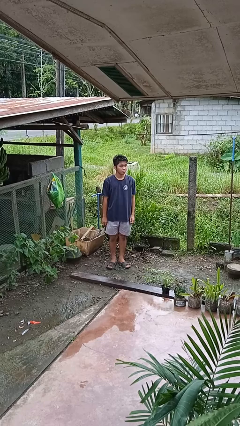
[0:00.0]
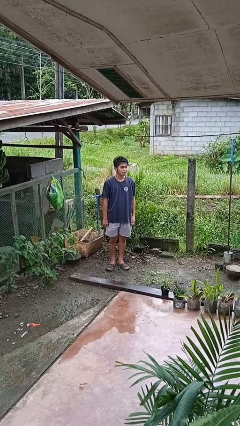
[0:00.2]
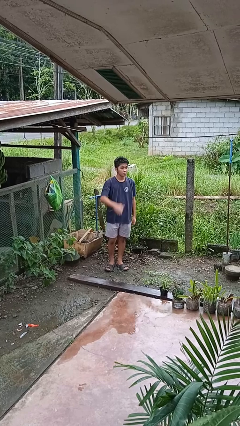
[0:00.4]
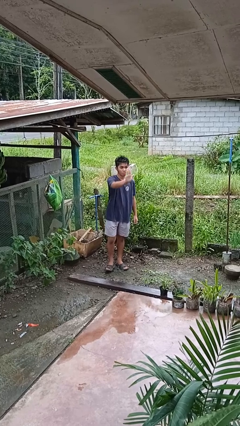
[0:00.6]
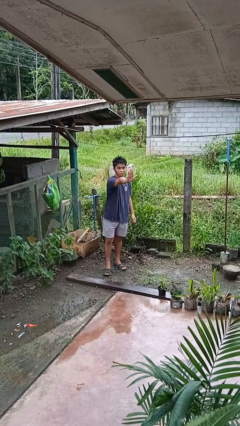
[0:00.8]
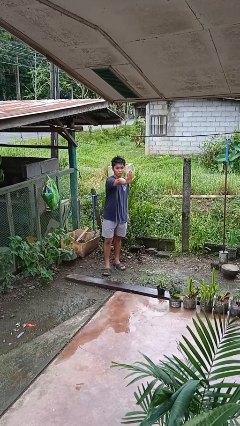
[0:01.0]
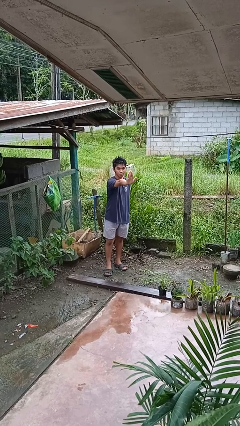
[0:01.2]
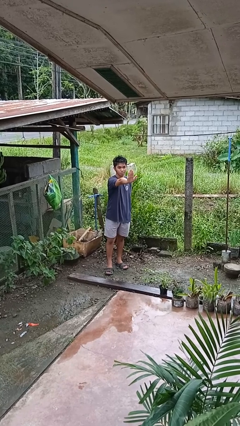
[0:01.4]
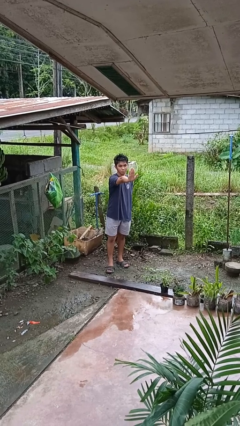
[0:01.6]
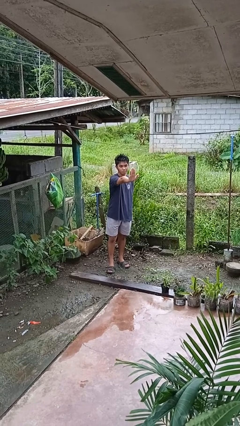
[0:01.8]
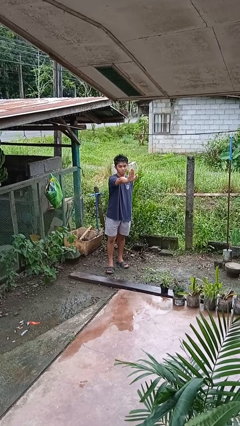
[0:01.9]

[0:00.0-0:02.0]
person gestures stop

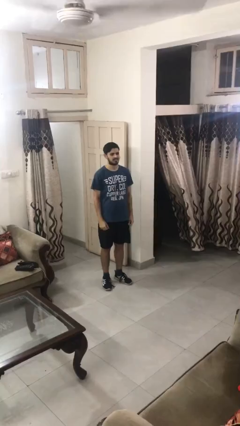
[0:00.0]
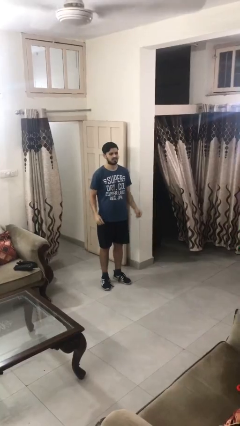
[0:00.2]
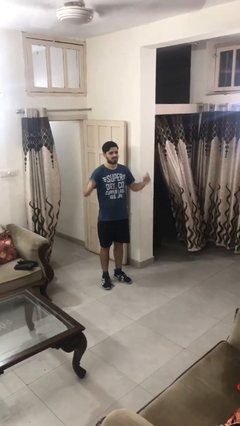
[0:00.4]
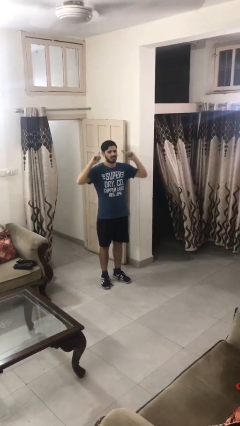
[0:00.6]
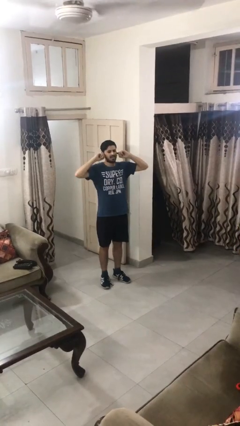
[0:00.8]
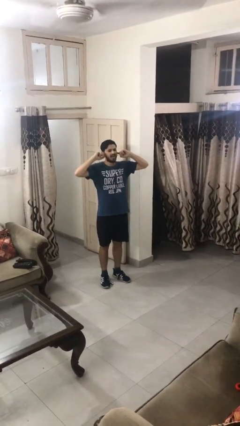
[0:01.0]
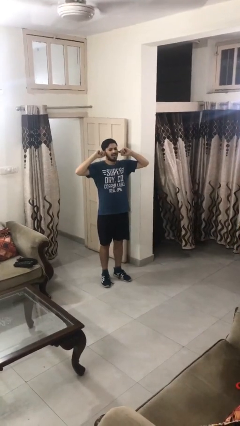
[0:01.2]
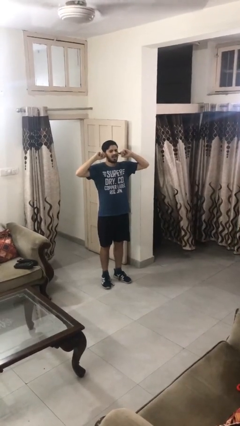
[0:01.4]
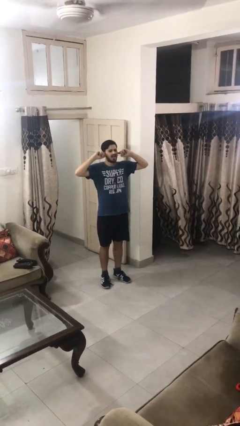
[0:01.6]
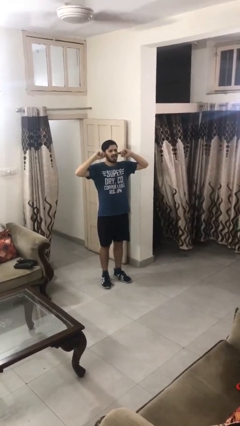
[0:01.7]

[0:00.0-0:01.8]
person puts fingers in ear

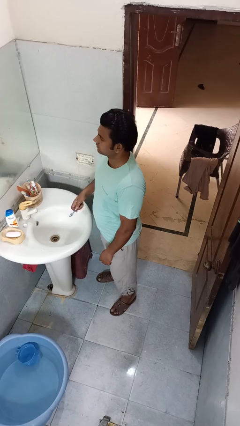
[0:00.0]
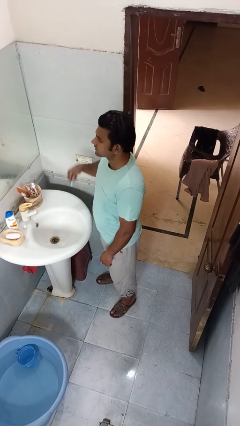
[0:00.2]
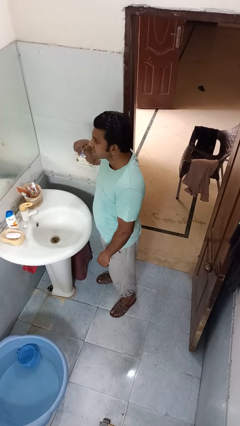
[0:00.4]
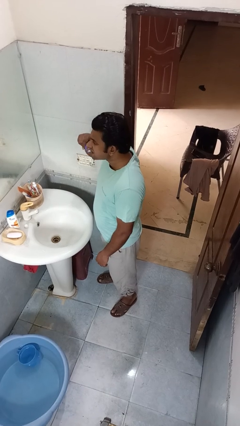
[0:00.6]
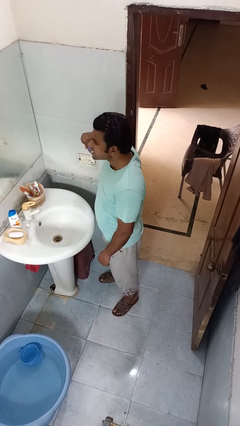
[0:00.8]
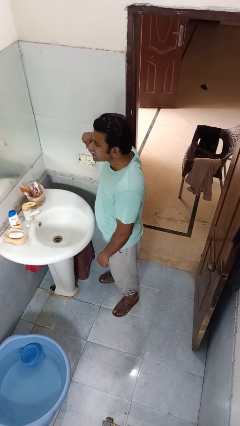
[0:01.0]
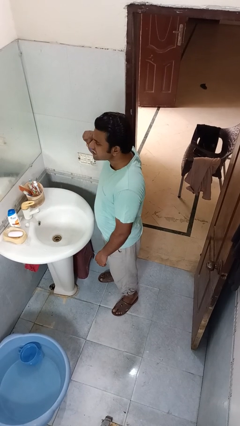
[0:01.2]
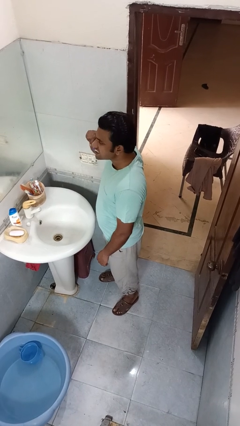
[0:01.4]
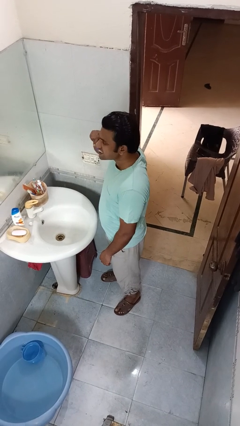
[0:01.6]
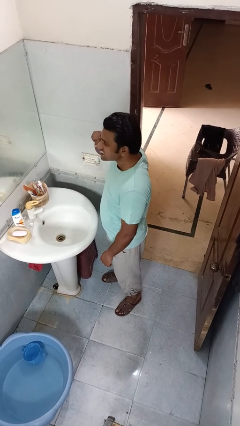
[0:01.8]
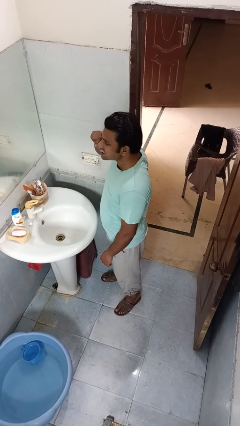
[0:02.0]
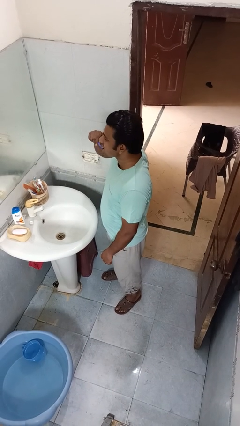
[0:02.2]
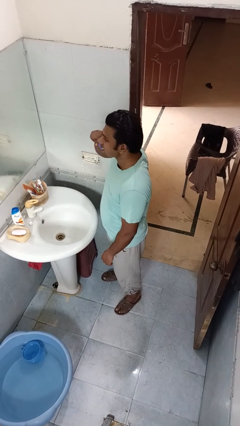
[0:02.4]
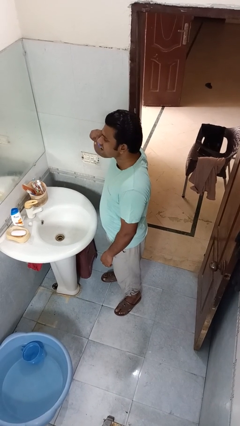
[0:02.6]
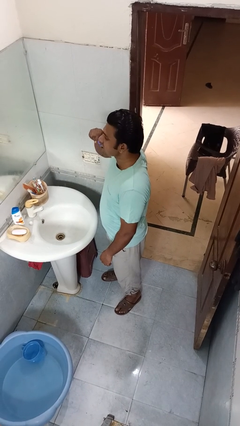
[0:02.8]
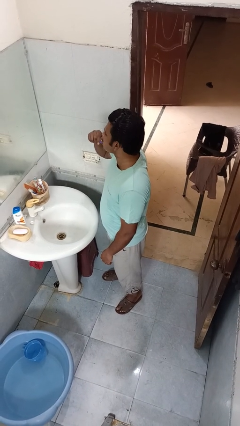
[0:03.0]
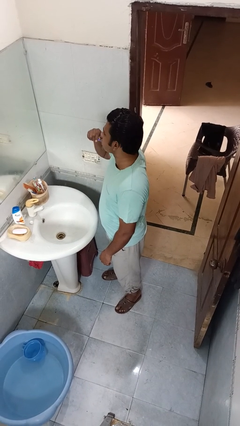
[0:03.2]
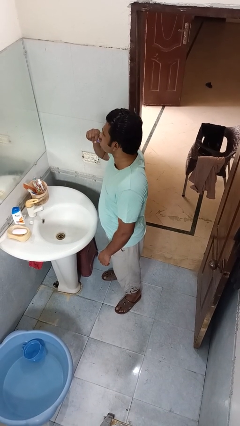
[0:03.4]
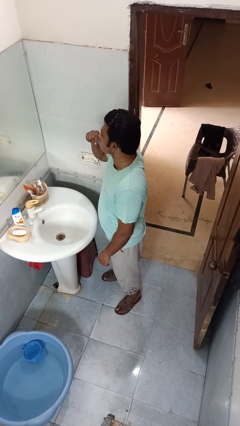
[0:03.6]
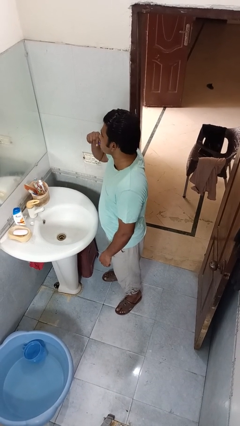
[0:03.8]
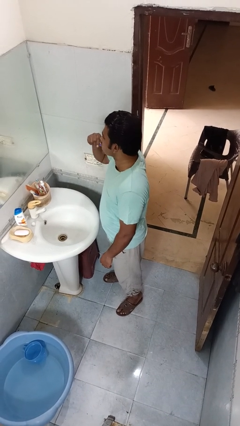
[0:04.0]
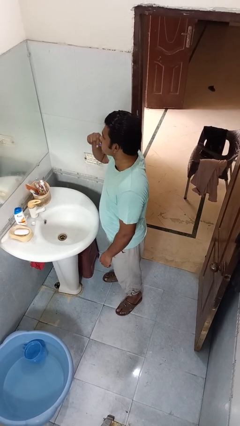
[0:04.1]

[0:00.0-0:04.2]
person brushes teeth

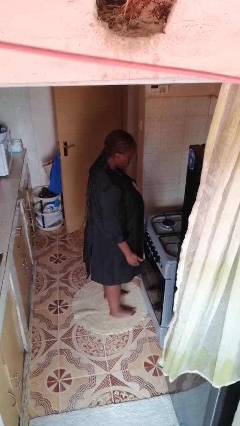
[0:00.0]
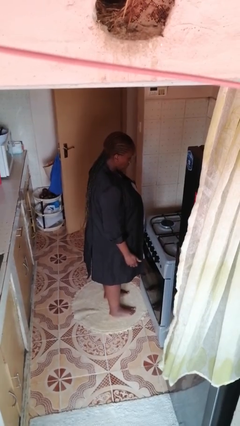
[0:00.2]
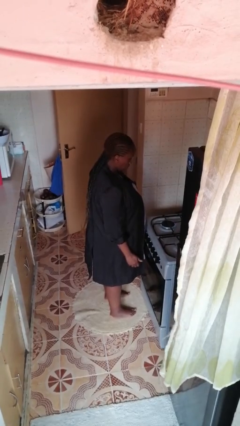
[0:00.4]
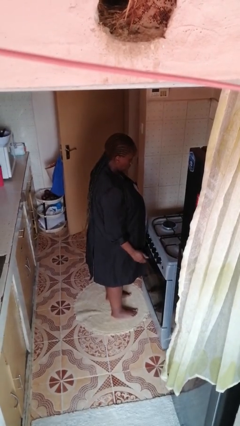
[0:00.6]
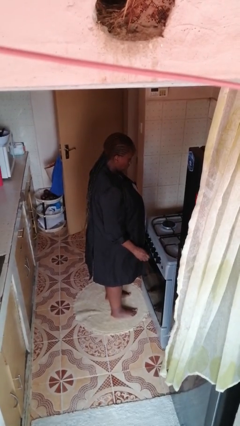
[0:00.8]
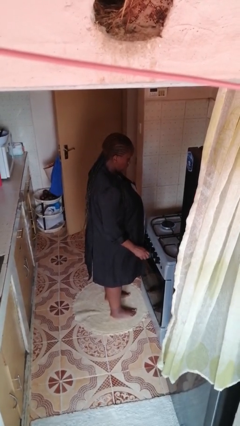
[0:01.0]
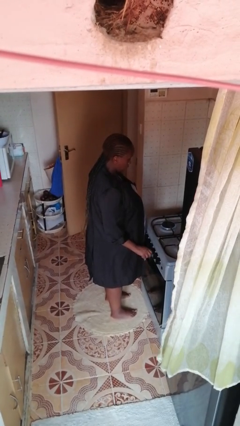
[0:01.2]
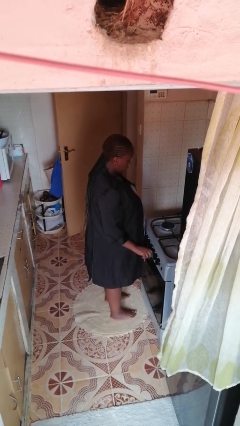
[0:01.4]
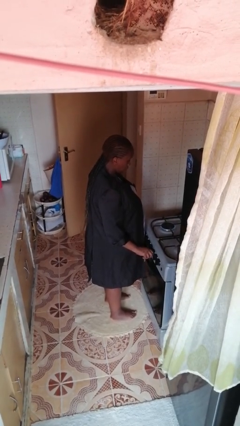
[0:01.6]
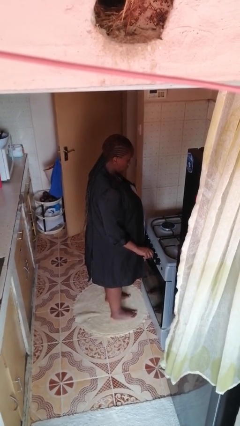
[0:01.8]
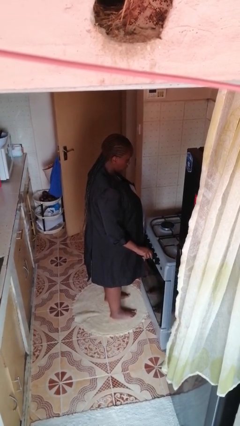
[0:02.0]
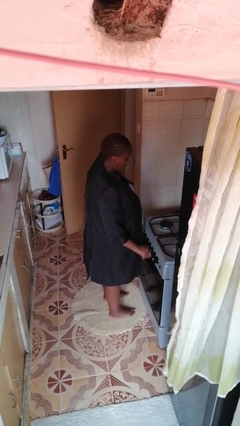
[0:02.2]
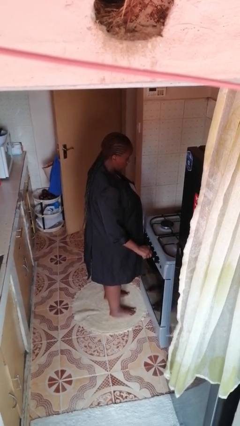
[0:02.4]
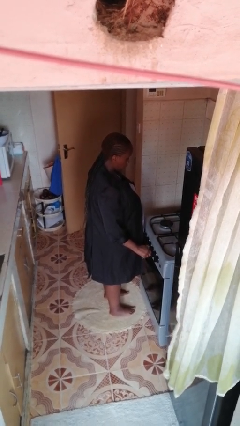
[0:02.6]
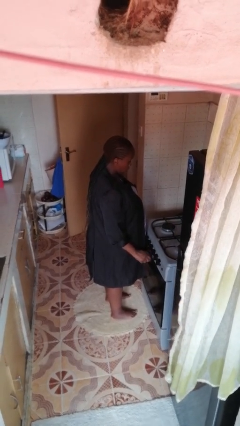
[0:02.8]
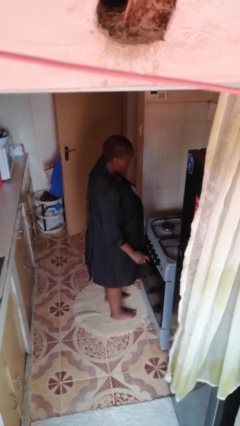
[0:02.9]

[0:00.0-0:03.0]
person turns off stovetop

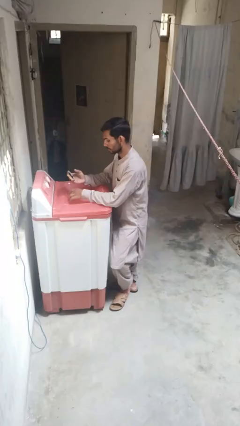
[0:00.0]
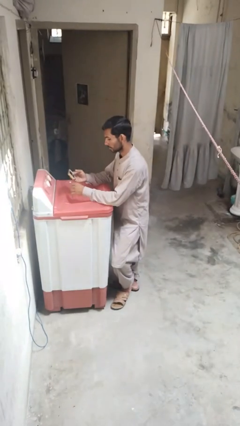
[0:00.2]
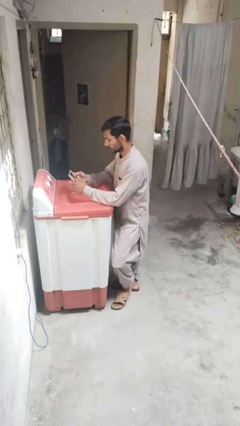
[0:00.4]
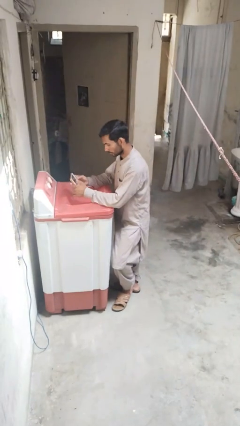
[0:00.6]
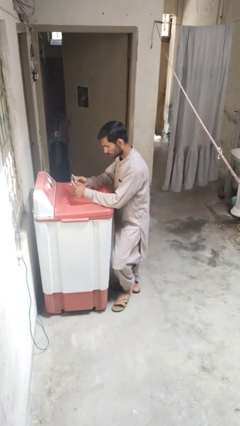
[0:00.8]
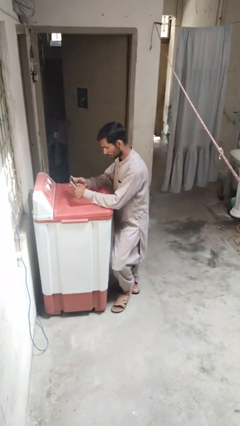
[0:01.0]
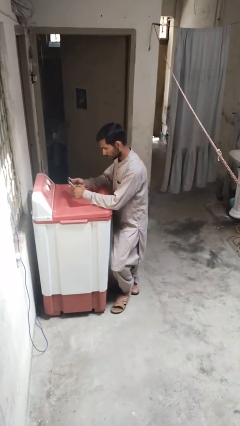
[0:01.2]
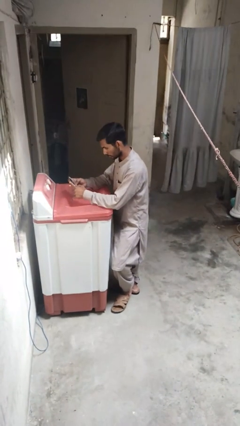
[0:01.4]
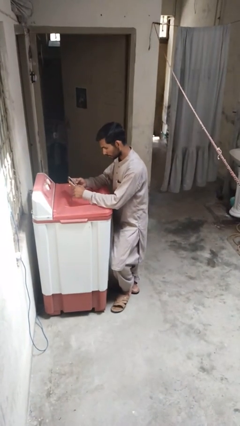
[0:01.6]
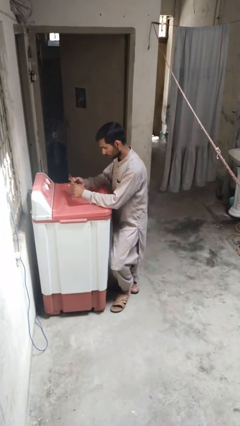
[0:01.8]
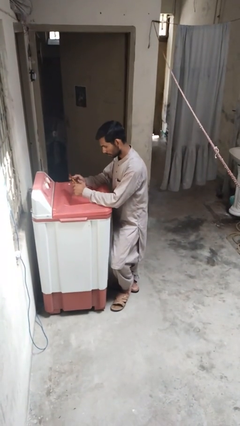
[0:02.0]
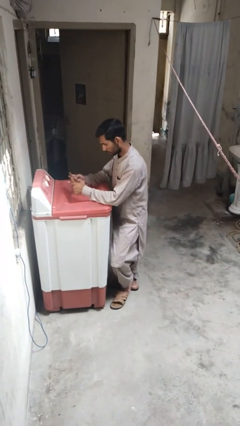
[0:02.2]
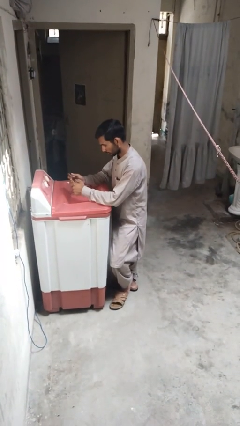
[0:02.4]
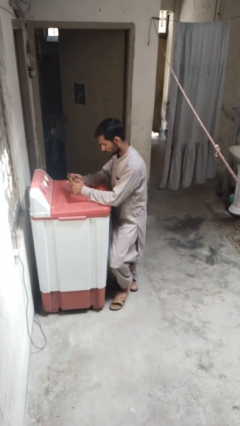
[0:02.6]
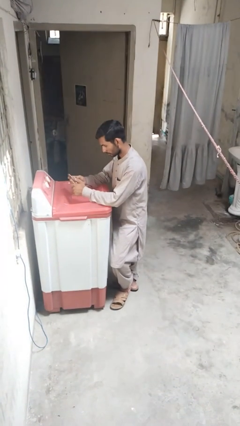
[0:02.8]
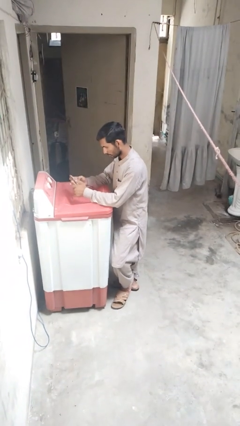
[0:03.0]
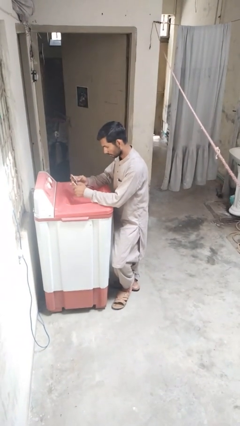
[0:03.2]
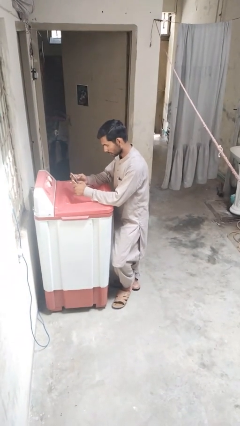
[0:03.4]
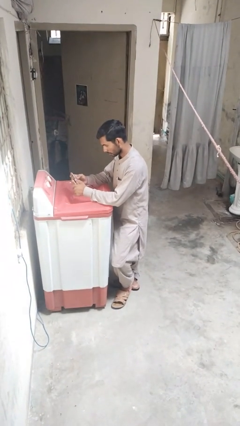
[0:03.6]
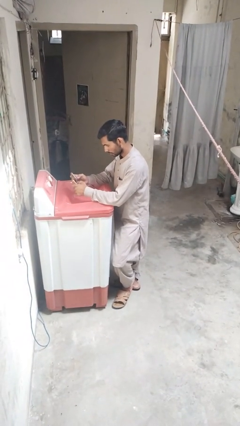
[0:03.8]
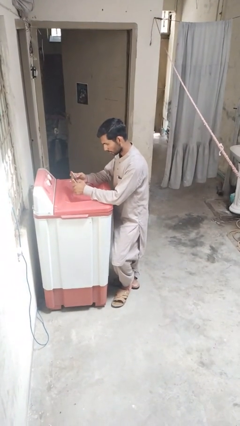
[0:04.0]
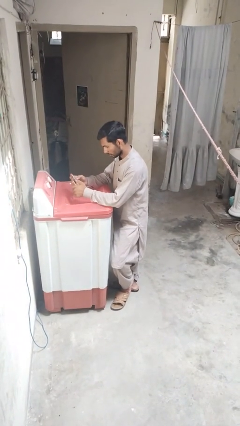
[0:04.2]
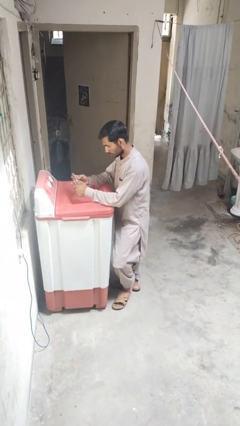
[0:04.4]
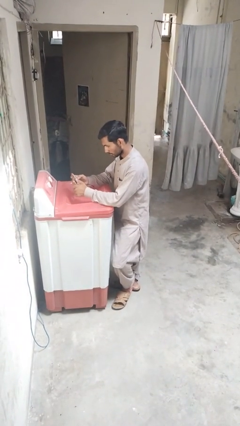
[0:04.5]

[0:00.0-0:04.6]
person interacts with tablet

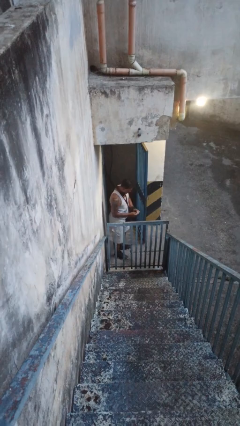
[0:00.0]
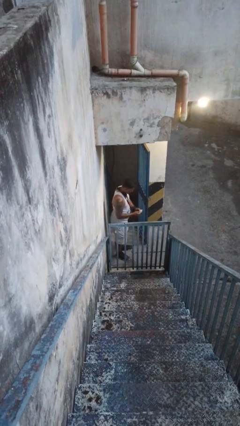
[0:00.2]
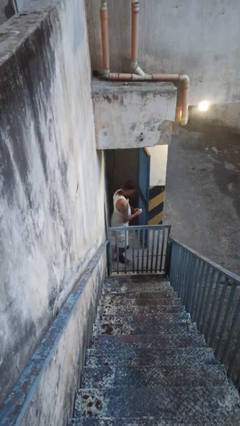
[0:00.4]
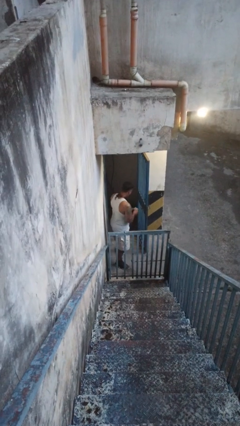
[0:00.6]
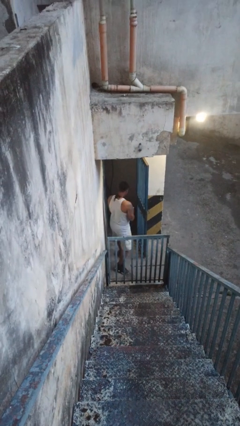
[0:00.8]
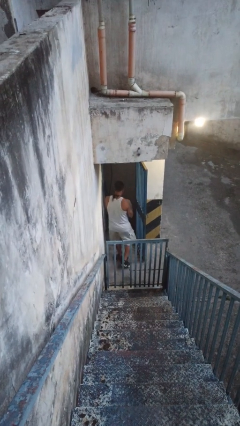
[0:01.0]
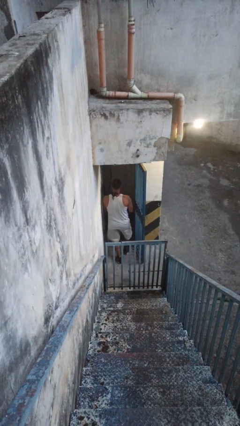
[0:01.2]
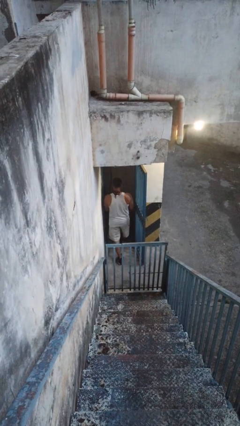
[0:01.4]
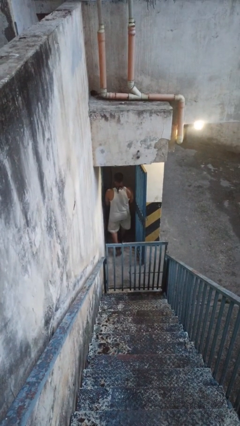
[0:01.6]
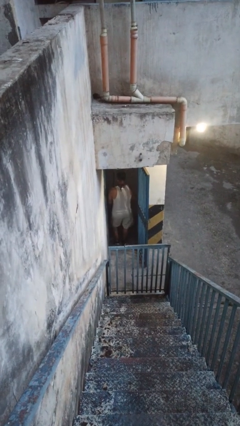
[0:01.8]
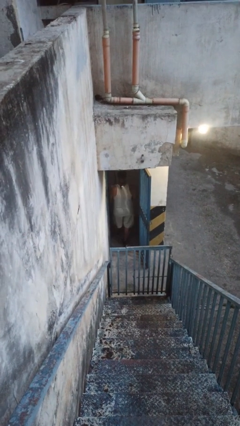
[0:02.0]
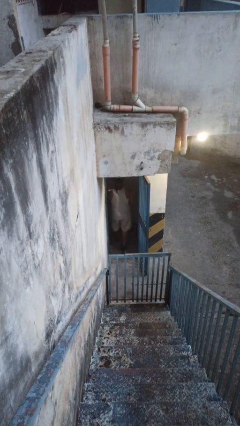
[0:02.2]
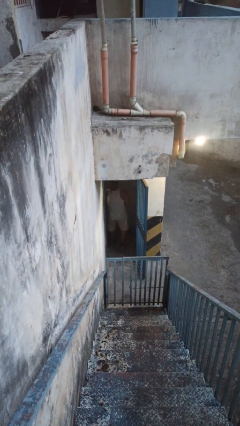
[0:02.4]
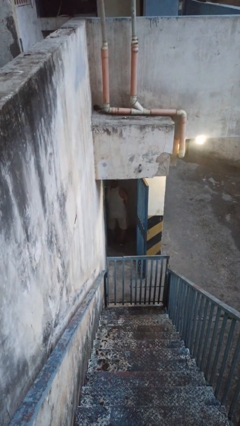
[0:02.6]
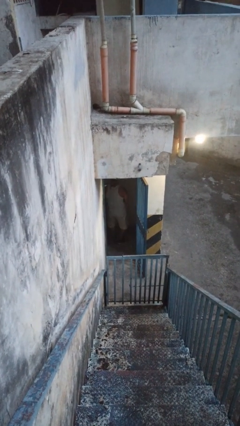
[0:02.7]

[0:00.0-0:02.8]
person exits scene through structure
